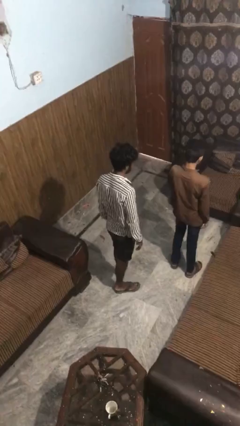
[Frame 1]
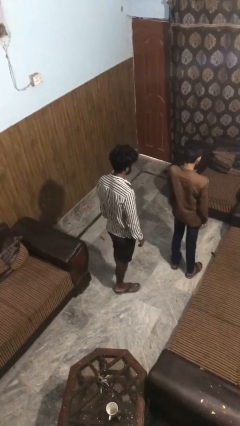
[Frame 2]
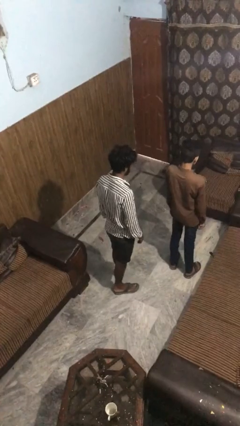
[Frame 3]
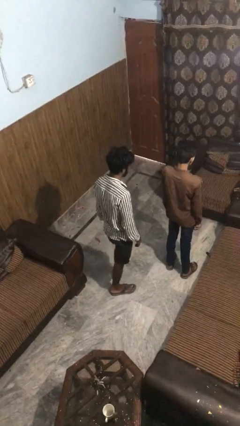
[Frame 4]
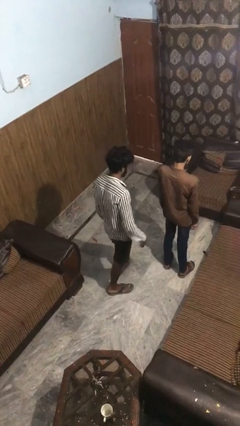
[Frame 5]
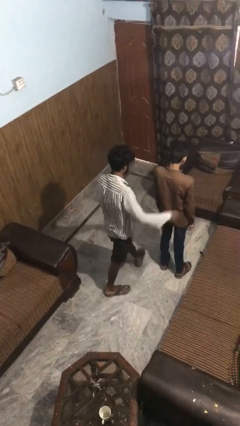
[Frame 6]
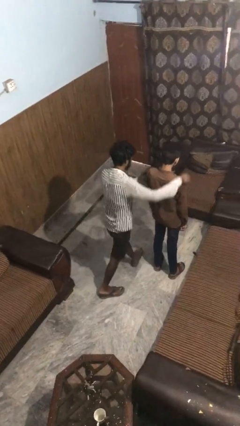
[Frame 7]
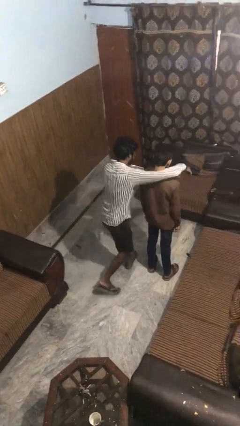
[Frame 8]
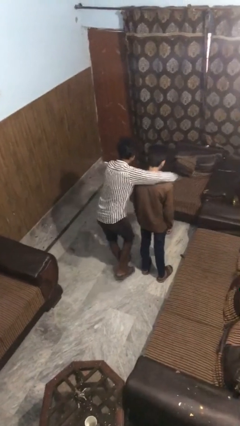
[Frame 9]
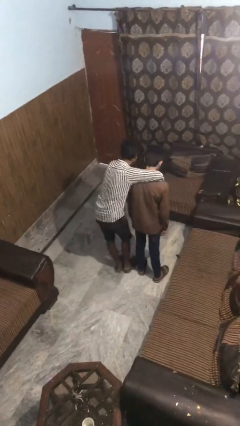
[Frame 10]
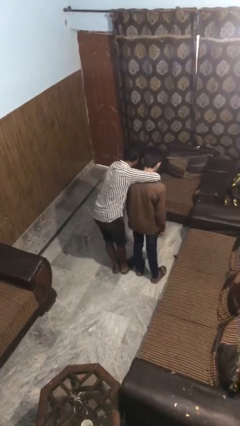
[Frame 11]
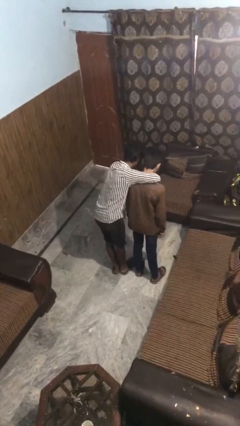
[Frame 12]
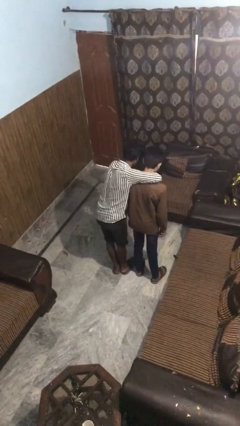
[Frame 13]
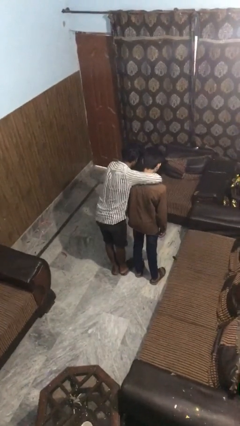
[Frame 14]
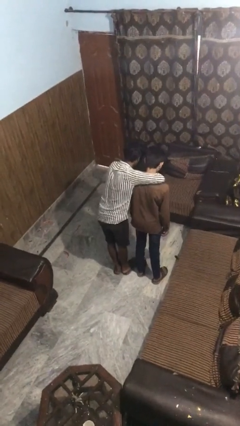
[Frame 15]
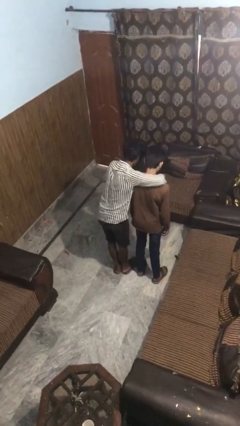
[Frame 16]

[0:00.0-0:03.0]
person hugs person from behind

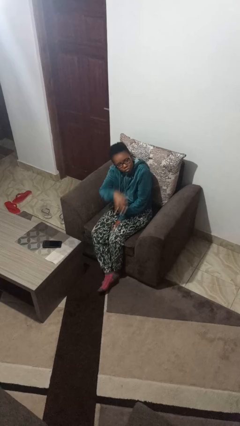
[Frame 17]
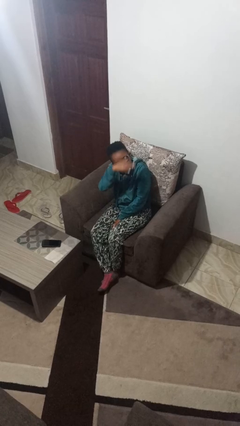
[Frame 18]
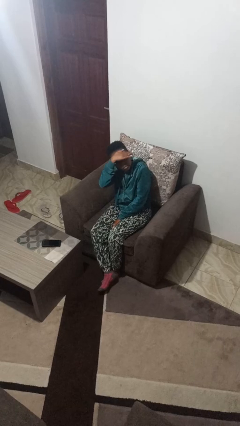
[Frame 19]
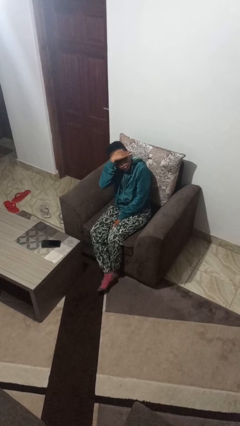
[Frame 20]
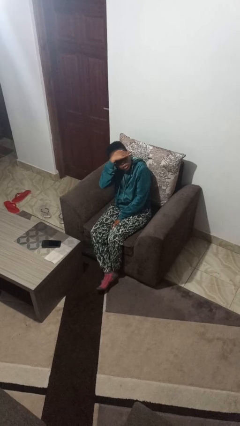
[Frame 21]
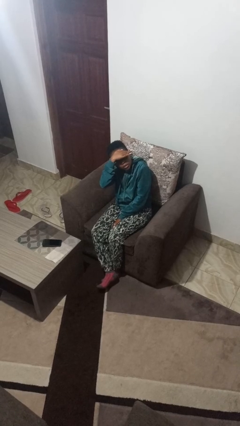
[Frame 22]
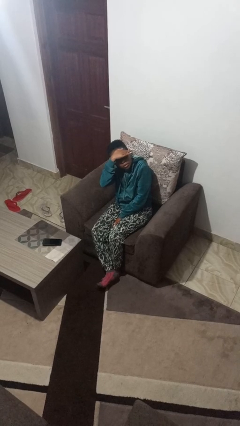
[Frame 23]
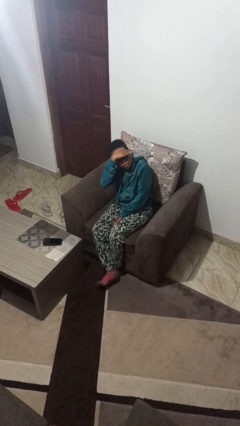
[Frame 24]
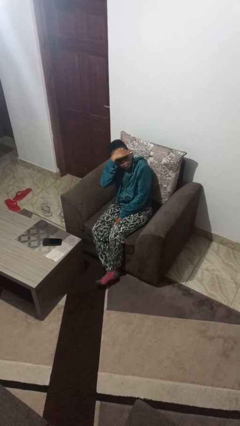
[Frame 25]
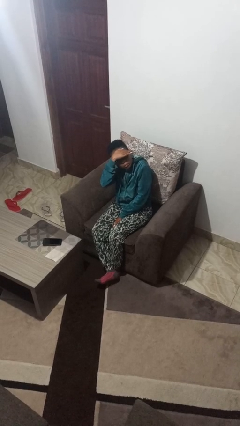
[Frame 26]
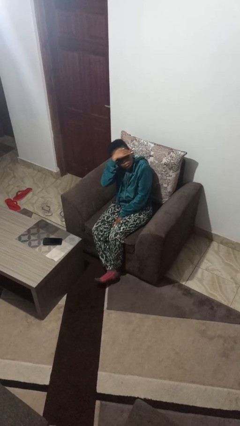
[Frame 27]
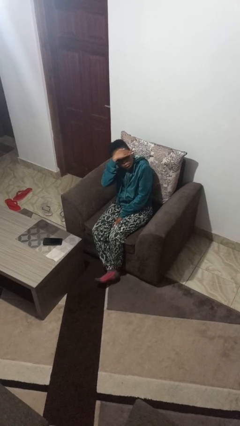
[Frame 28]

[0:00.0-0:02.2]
person shades eyes

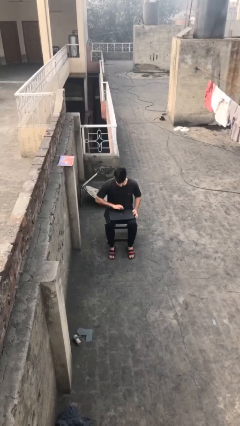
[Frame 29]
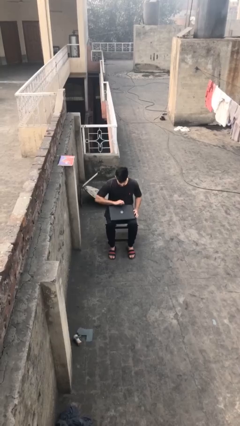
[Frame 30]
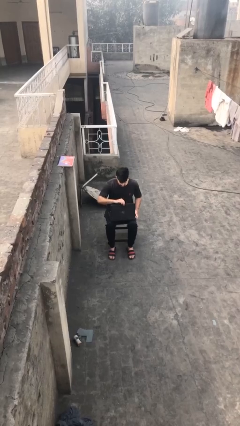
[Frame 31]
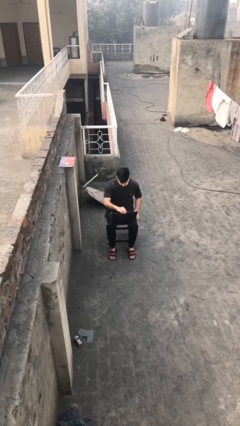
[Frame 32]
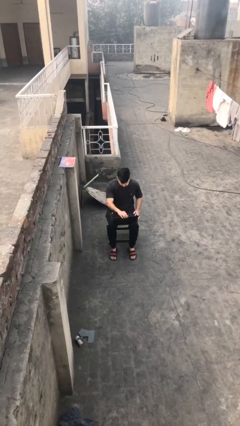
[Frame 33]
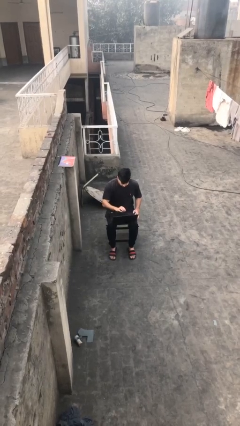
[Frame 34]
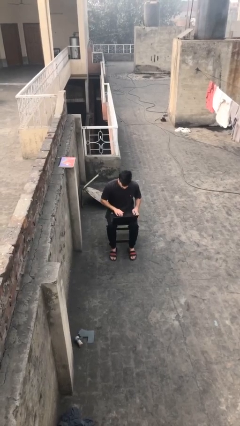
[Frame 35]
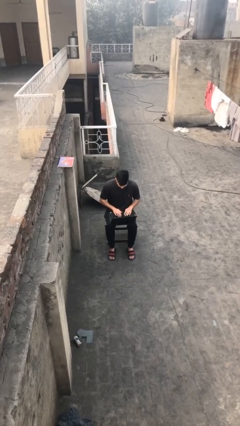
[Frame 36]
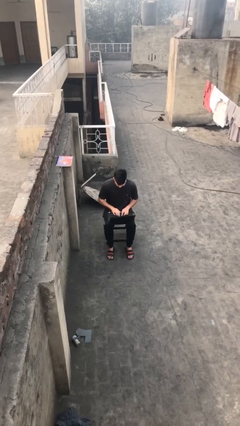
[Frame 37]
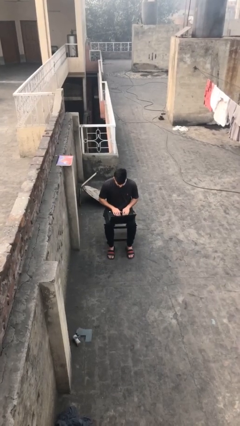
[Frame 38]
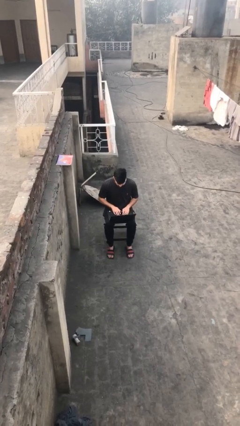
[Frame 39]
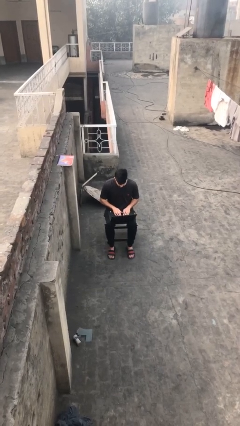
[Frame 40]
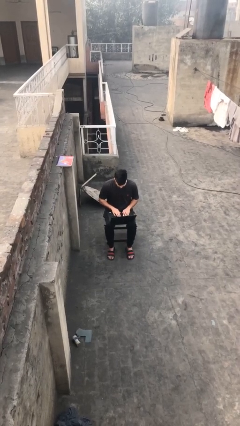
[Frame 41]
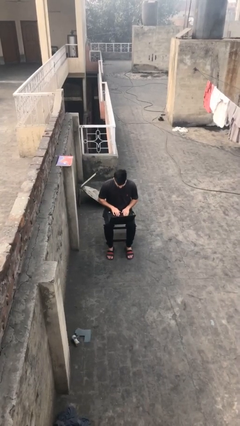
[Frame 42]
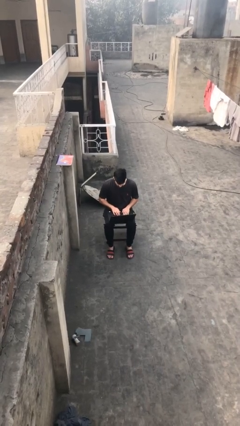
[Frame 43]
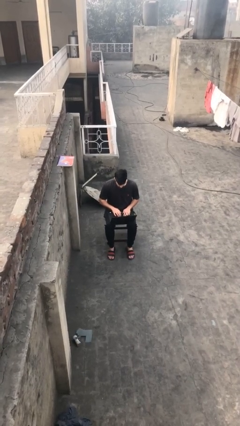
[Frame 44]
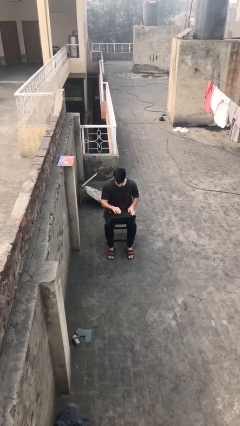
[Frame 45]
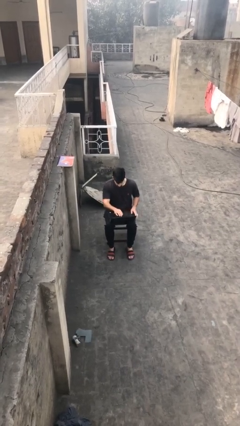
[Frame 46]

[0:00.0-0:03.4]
person interacts with laptop

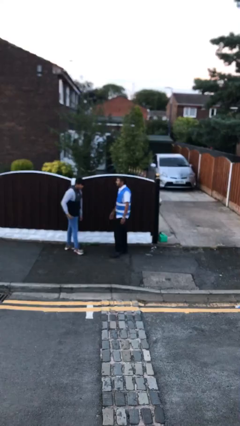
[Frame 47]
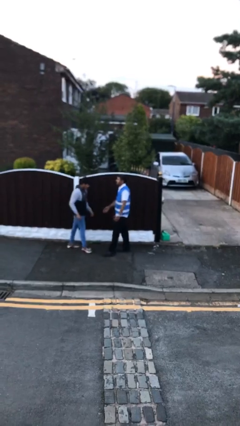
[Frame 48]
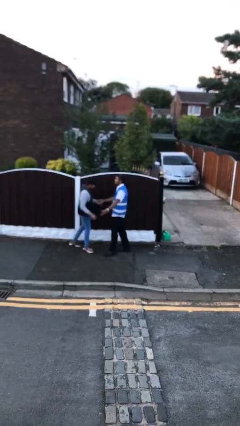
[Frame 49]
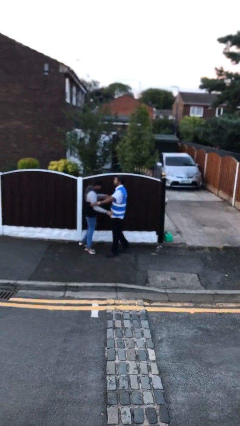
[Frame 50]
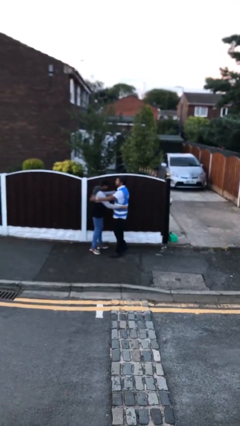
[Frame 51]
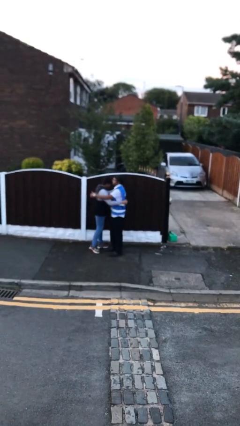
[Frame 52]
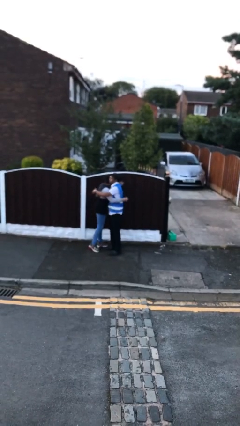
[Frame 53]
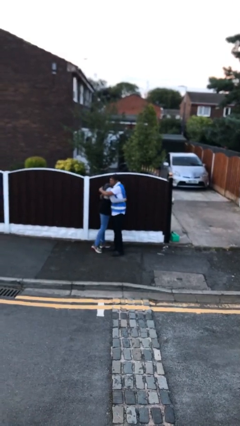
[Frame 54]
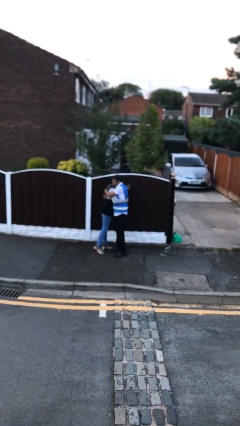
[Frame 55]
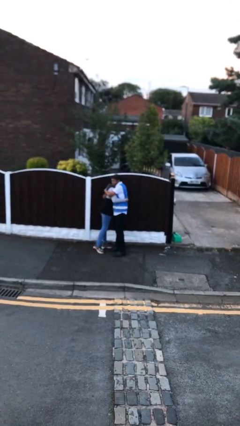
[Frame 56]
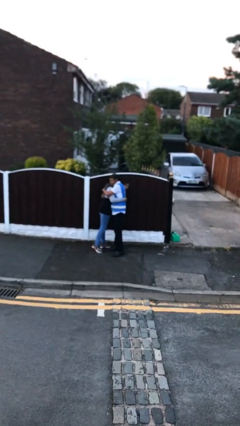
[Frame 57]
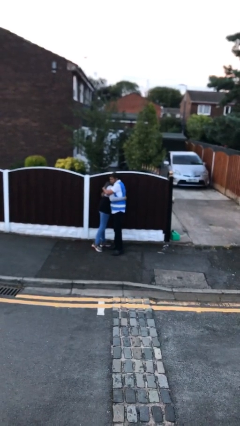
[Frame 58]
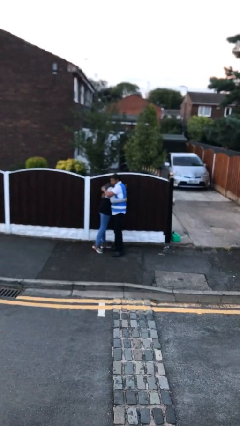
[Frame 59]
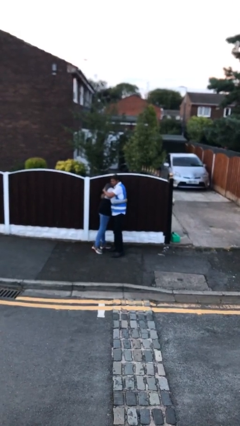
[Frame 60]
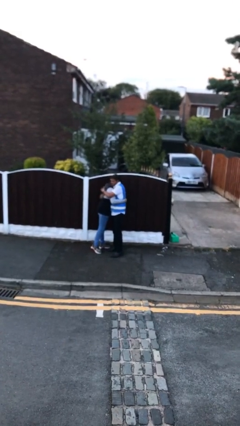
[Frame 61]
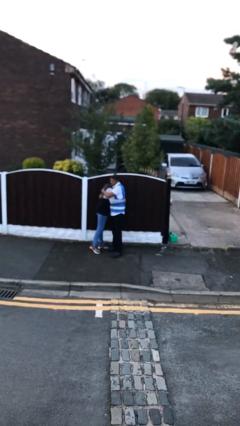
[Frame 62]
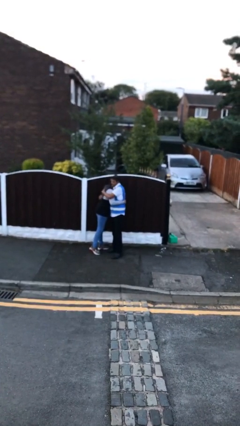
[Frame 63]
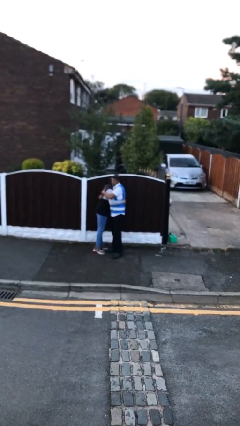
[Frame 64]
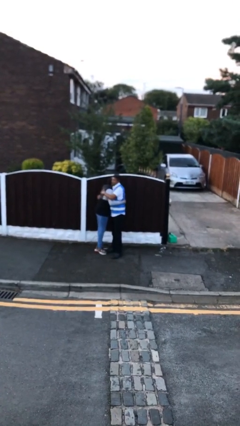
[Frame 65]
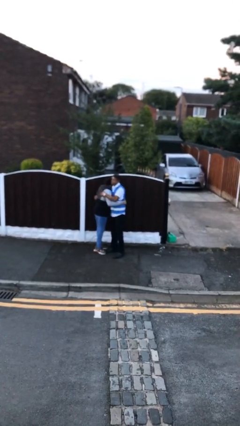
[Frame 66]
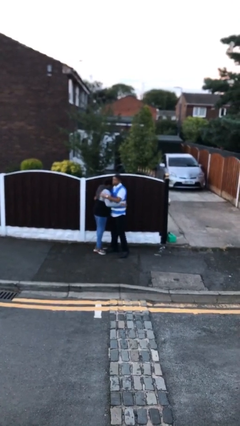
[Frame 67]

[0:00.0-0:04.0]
person embraces person

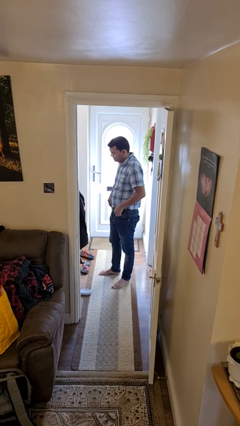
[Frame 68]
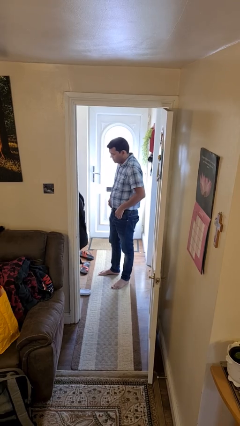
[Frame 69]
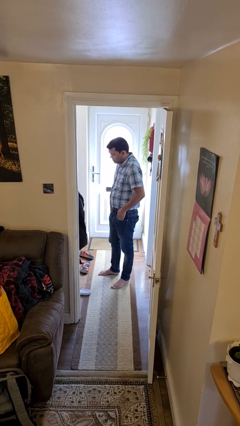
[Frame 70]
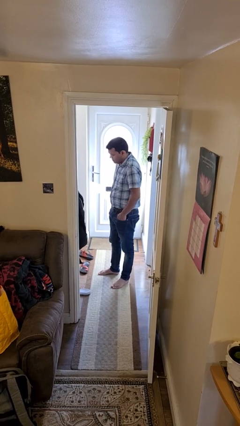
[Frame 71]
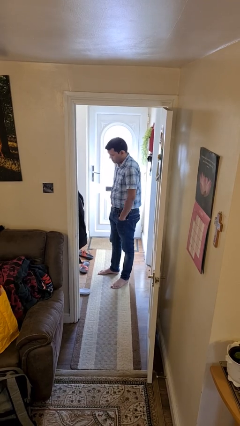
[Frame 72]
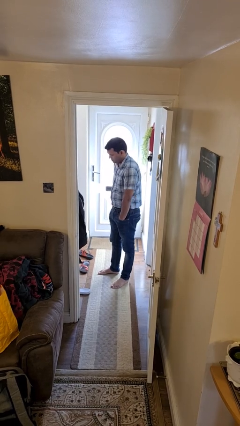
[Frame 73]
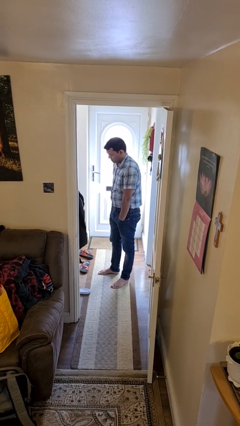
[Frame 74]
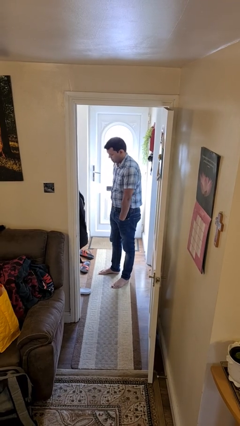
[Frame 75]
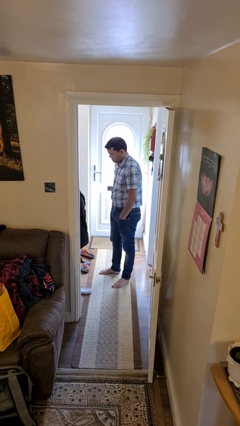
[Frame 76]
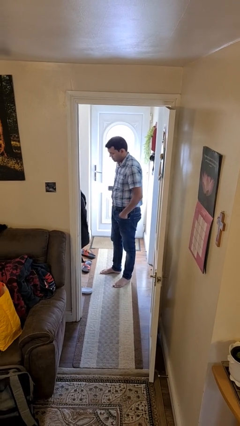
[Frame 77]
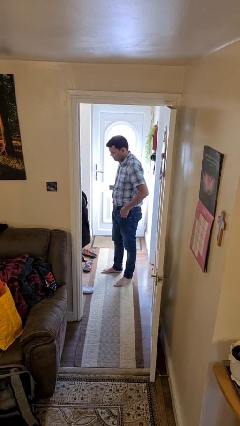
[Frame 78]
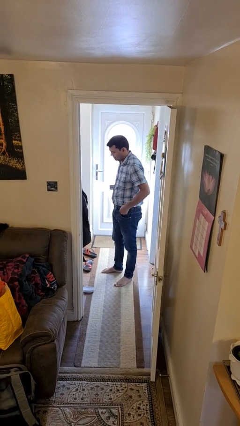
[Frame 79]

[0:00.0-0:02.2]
person puts hands in back pockets

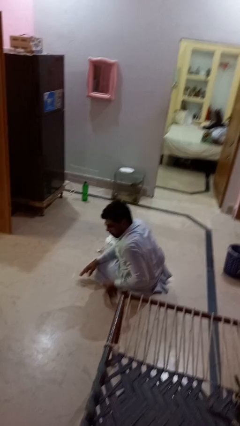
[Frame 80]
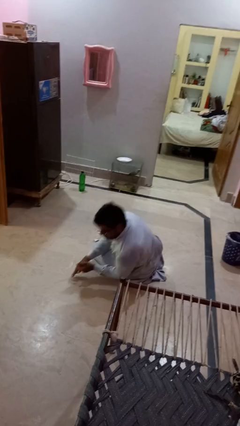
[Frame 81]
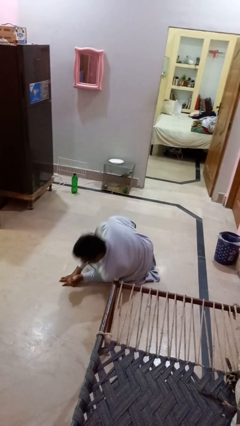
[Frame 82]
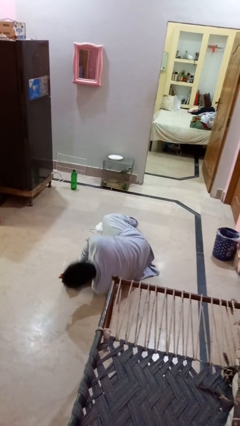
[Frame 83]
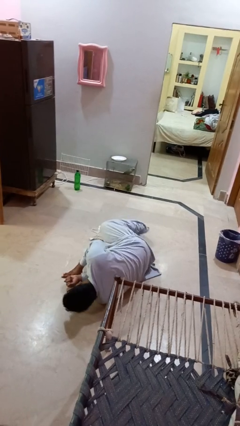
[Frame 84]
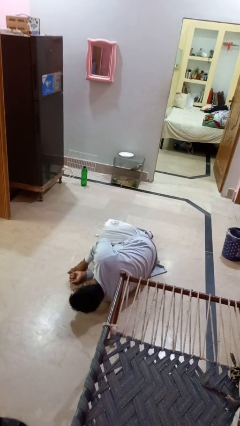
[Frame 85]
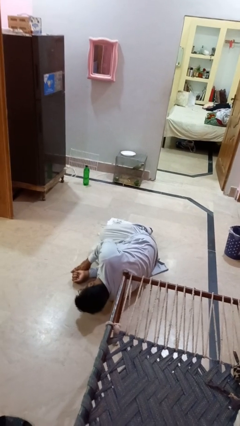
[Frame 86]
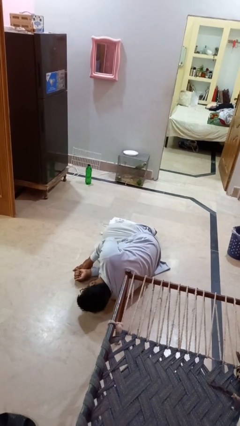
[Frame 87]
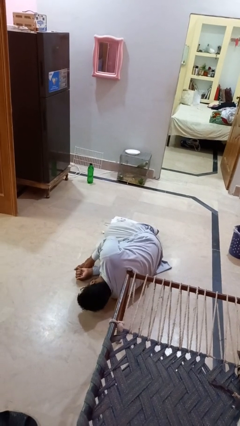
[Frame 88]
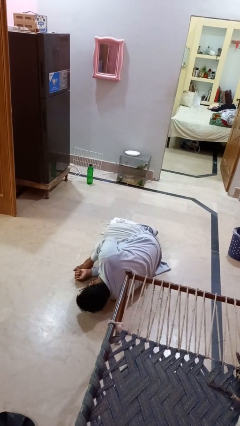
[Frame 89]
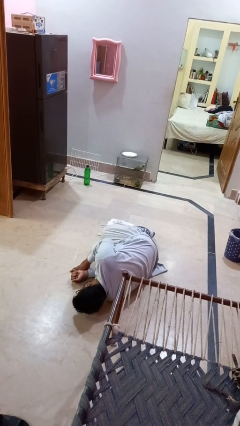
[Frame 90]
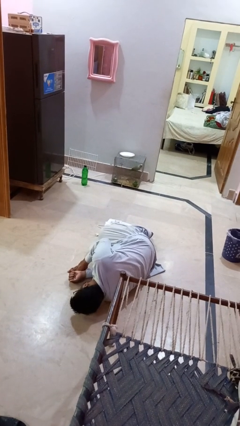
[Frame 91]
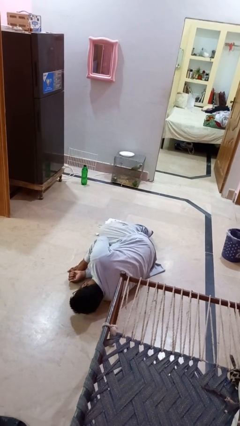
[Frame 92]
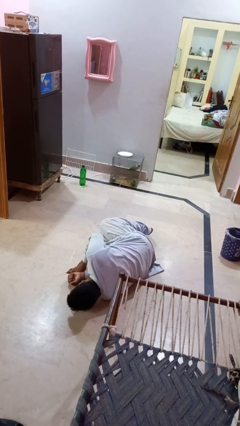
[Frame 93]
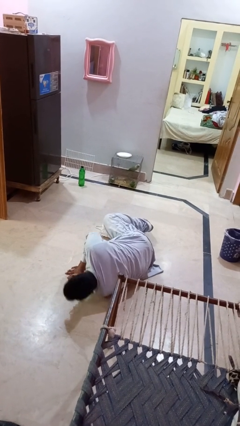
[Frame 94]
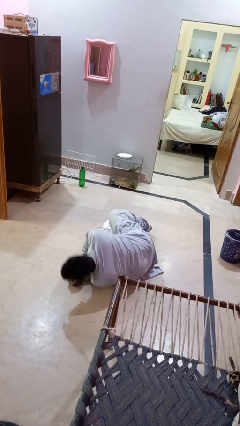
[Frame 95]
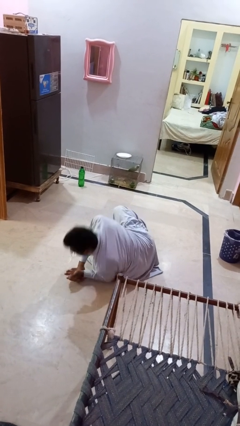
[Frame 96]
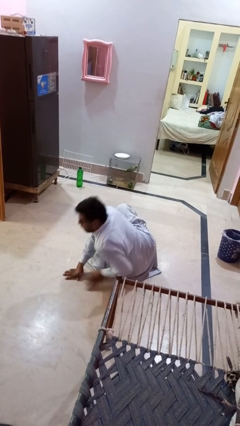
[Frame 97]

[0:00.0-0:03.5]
person lies down on floor
